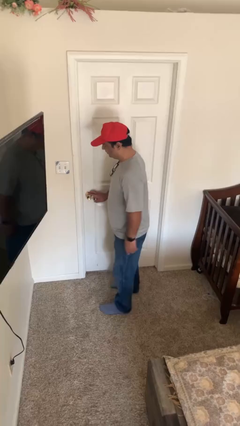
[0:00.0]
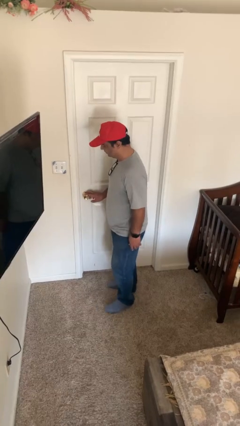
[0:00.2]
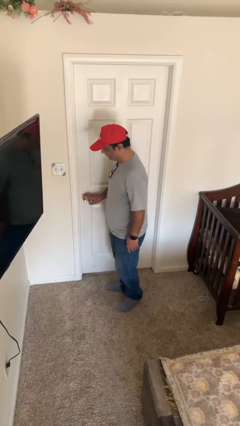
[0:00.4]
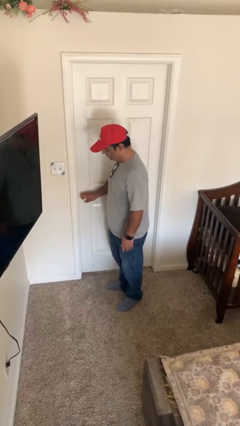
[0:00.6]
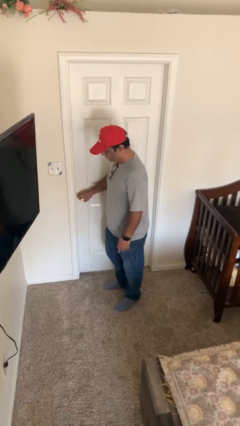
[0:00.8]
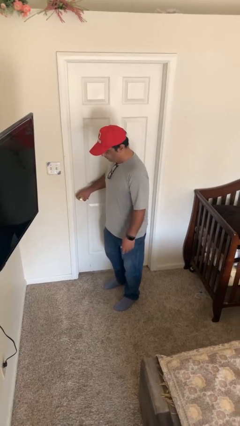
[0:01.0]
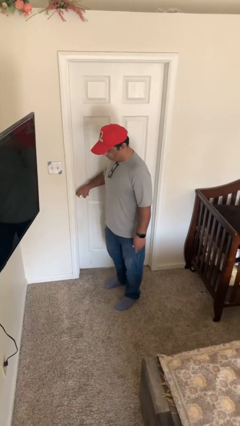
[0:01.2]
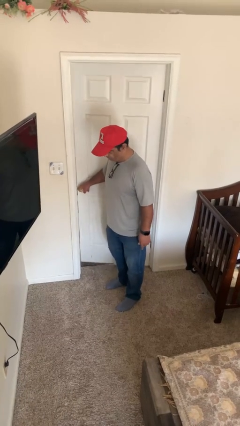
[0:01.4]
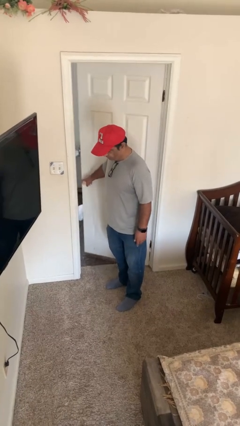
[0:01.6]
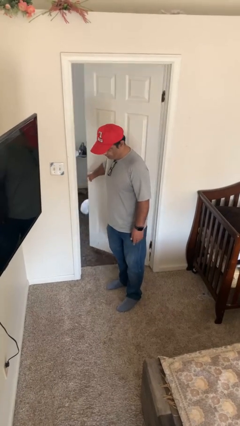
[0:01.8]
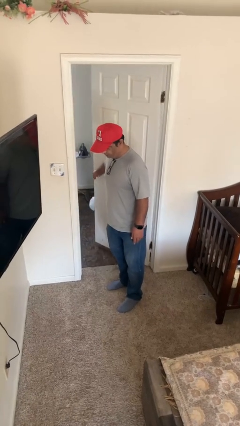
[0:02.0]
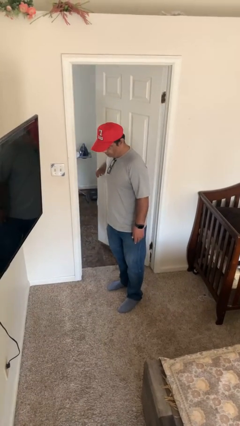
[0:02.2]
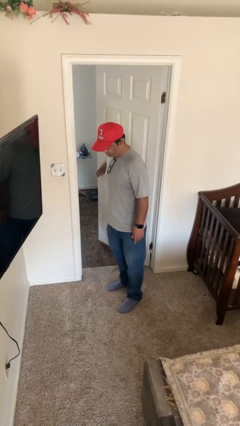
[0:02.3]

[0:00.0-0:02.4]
person opens facility door

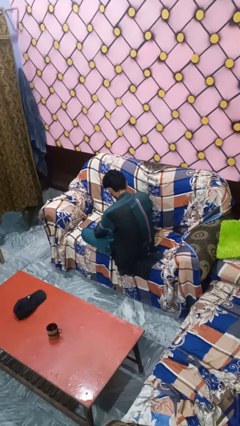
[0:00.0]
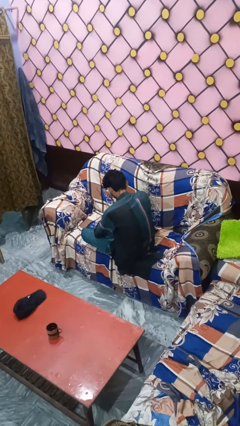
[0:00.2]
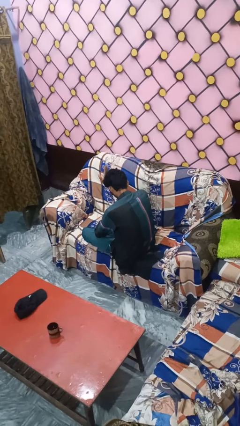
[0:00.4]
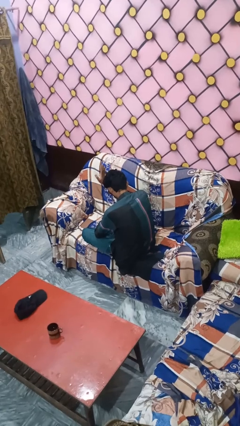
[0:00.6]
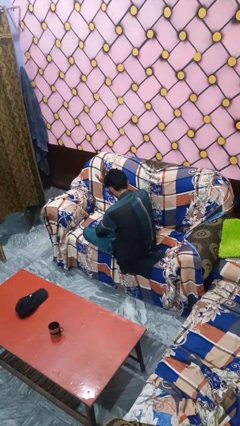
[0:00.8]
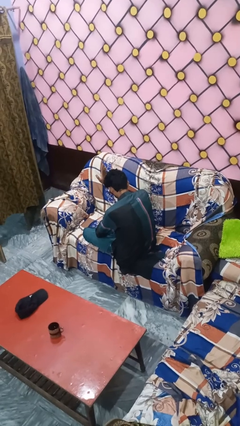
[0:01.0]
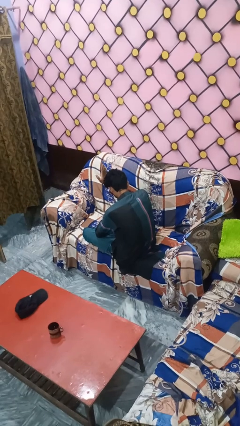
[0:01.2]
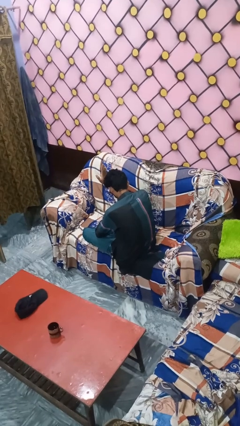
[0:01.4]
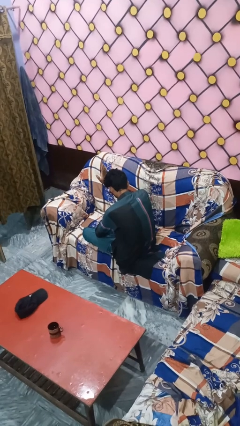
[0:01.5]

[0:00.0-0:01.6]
person gestures stop

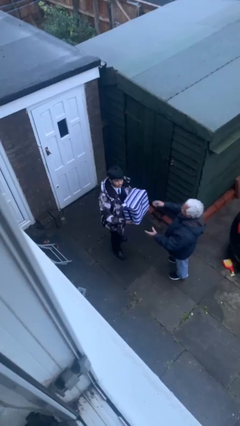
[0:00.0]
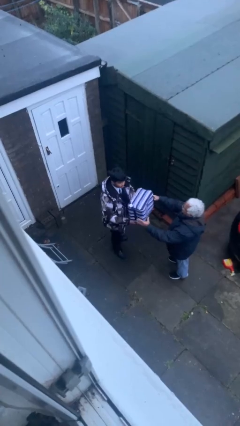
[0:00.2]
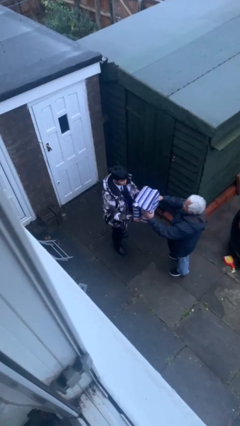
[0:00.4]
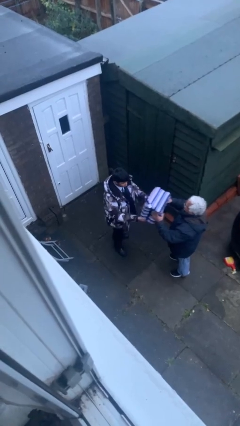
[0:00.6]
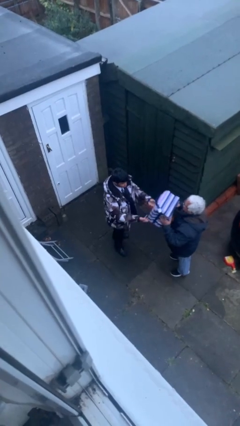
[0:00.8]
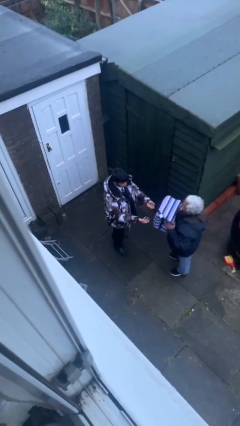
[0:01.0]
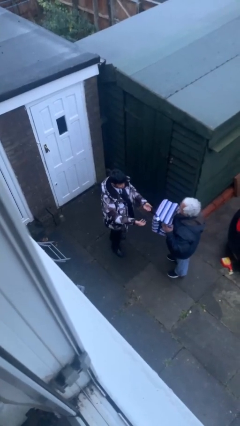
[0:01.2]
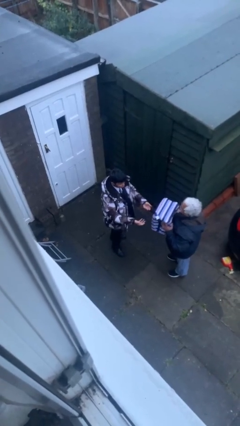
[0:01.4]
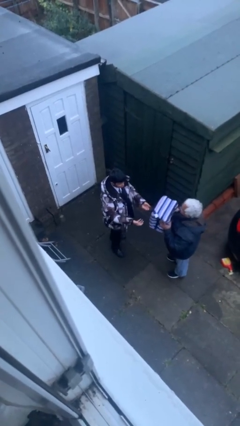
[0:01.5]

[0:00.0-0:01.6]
person transfers object to person

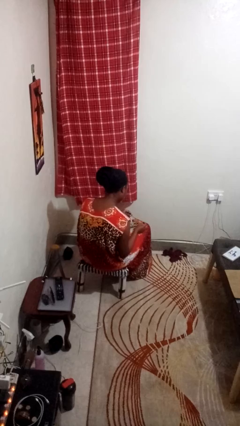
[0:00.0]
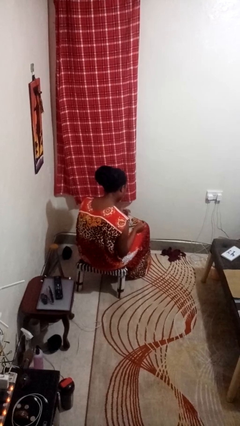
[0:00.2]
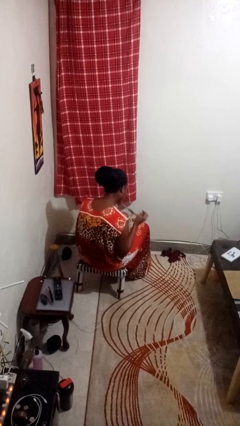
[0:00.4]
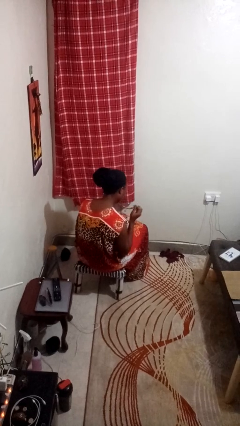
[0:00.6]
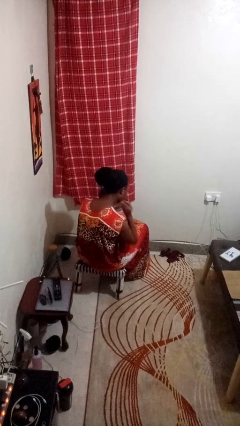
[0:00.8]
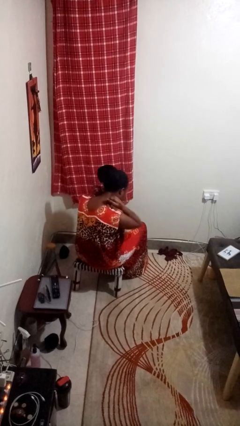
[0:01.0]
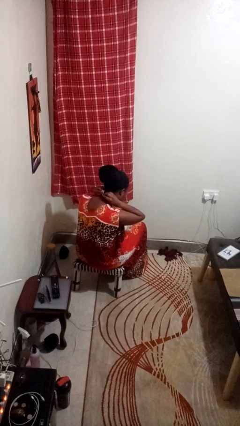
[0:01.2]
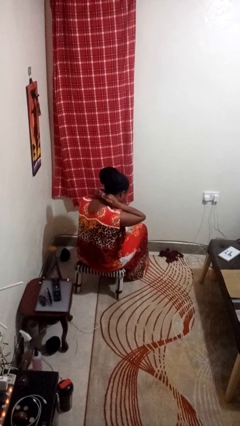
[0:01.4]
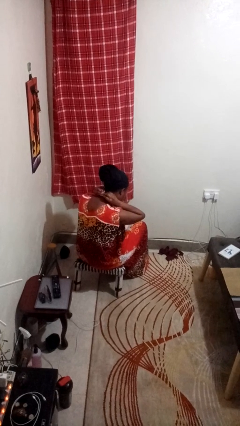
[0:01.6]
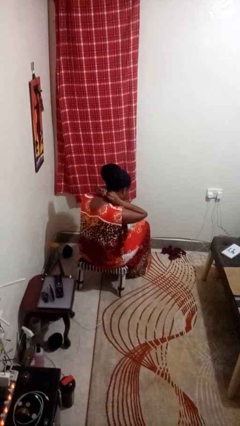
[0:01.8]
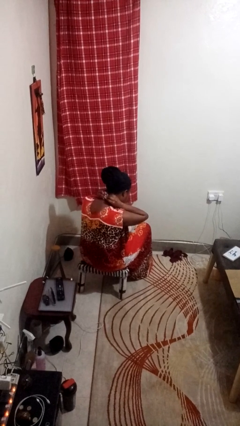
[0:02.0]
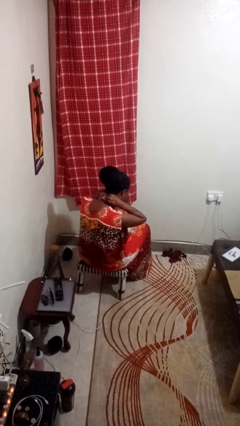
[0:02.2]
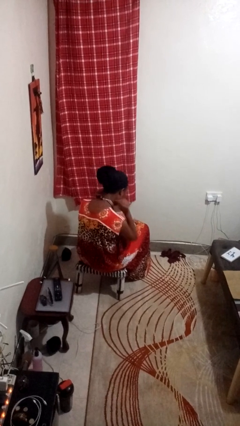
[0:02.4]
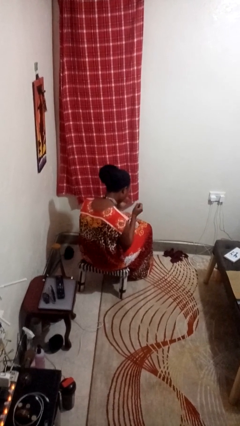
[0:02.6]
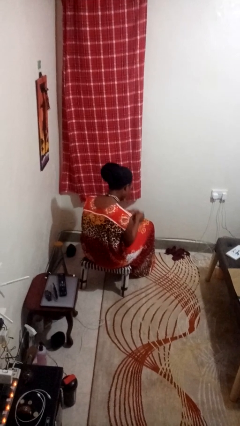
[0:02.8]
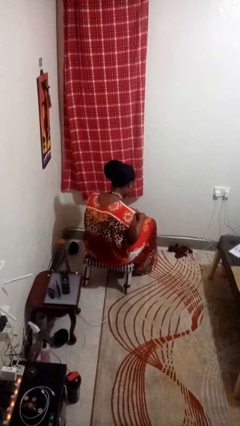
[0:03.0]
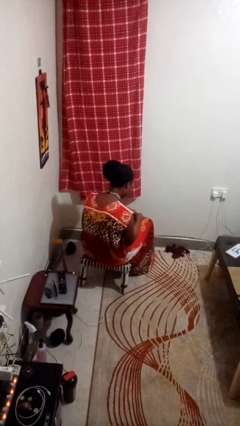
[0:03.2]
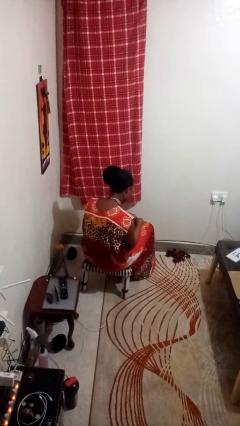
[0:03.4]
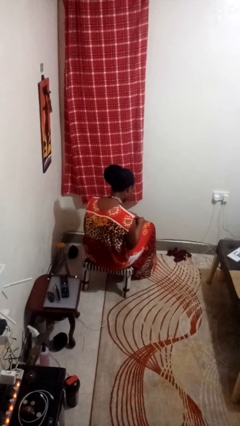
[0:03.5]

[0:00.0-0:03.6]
person puts on necklace

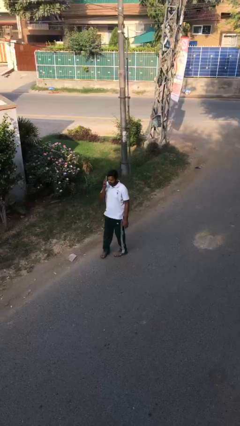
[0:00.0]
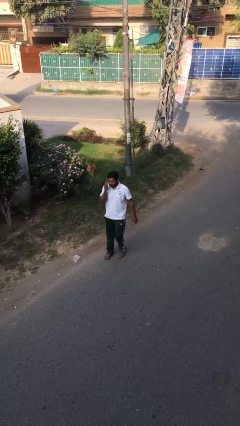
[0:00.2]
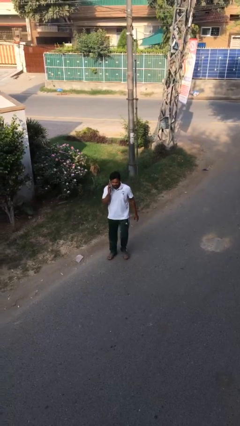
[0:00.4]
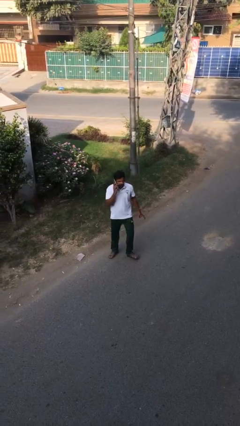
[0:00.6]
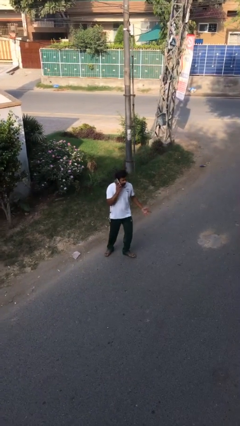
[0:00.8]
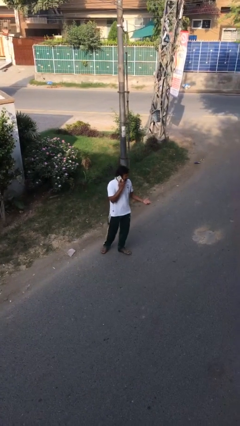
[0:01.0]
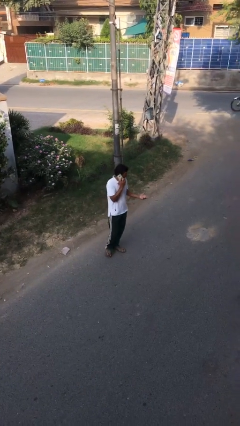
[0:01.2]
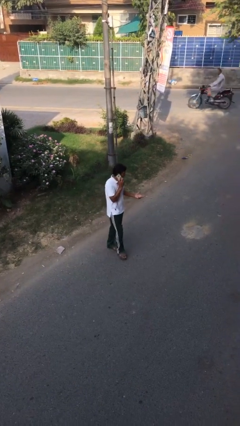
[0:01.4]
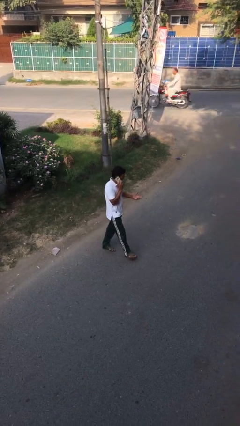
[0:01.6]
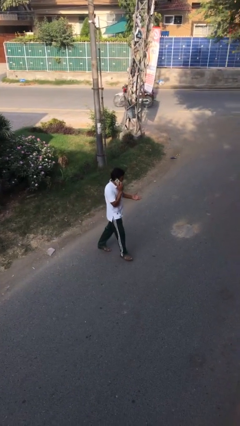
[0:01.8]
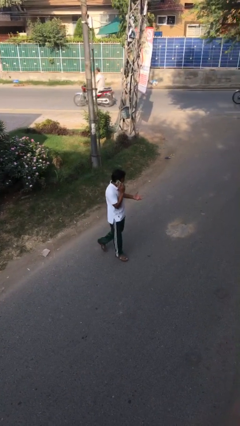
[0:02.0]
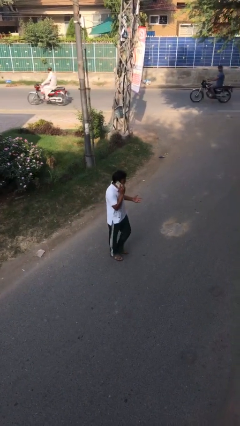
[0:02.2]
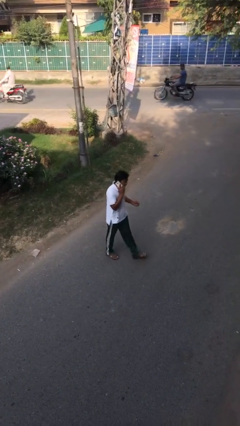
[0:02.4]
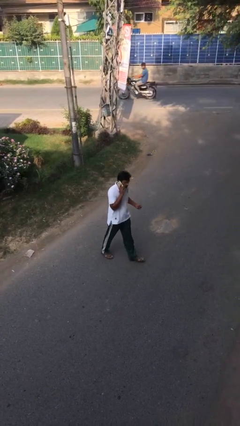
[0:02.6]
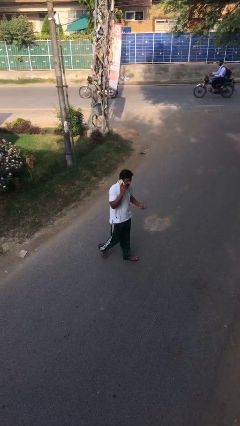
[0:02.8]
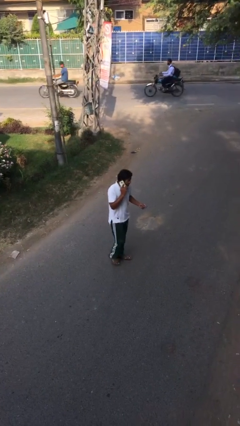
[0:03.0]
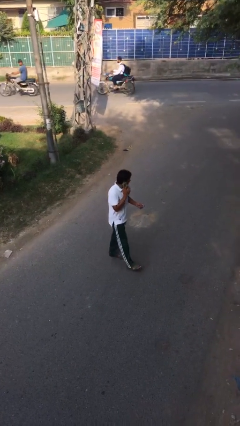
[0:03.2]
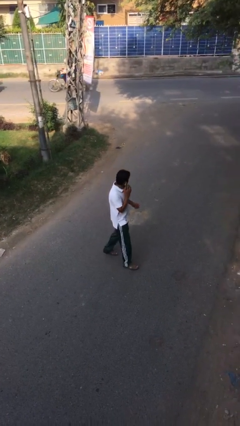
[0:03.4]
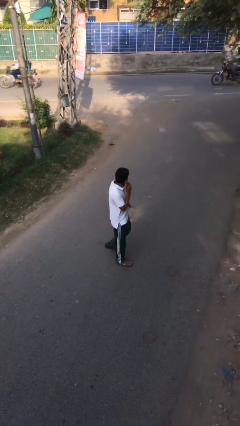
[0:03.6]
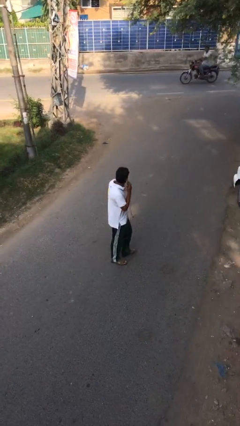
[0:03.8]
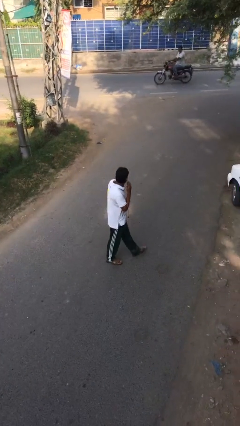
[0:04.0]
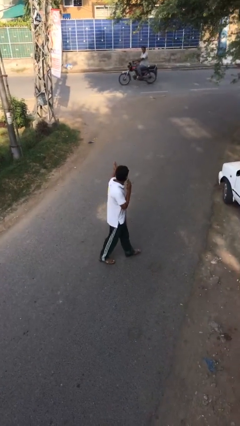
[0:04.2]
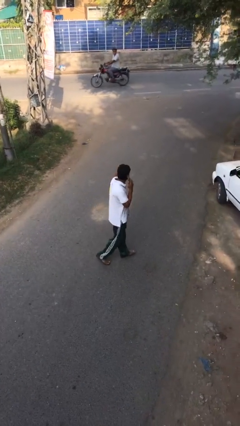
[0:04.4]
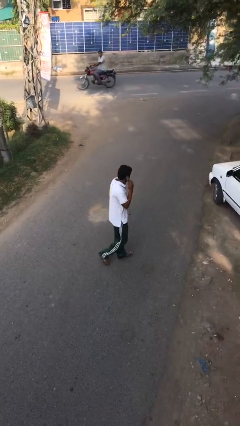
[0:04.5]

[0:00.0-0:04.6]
person talks on phone

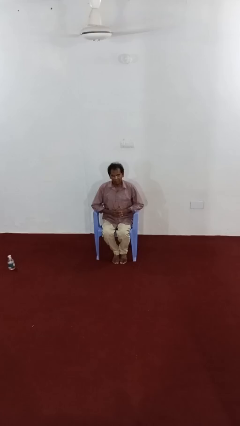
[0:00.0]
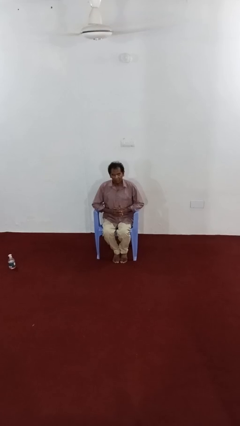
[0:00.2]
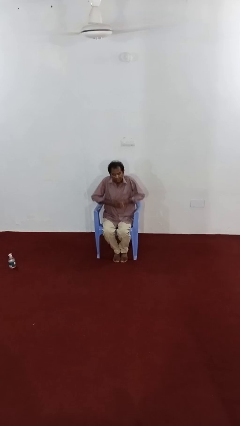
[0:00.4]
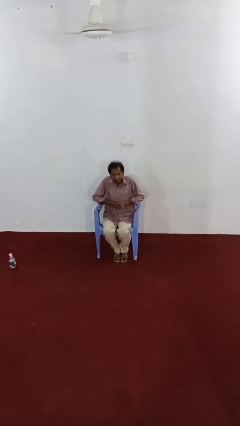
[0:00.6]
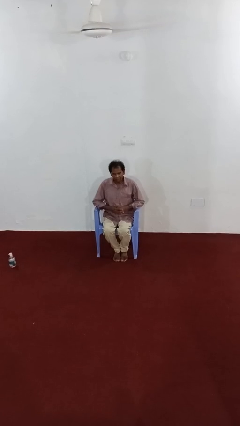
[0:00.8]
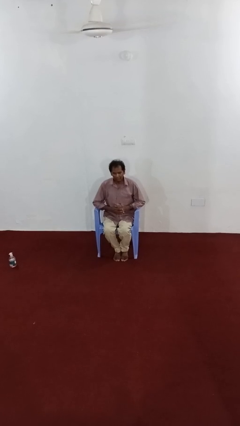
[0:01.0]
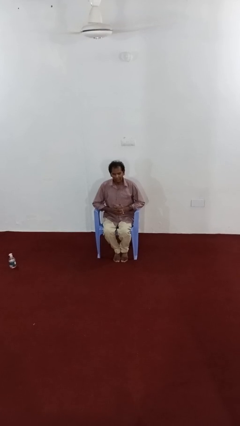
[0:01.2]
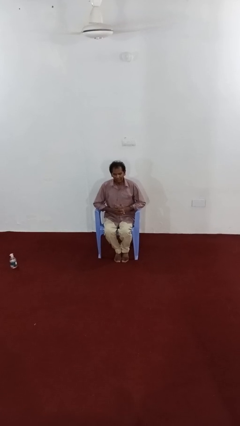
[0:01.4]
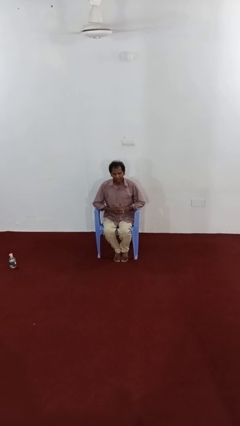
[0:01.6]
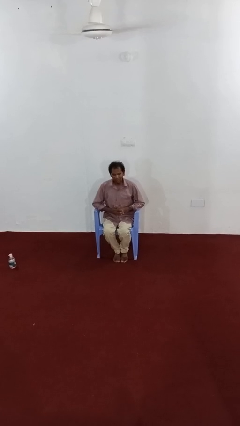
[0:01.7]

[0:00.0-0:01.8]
person shrugs

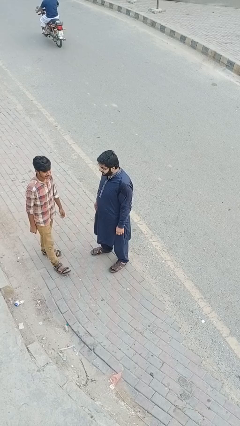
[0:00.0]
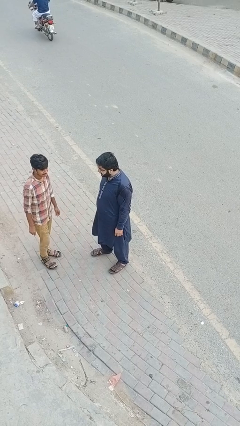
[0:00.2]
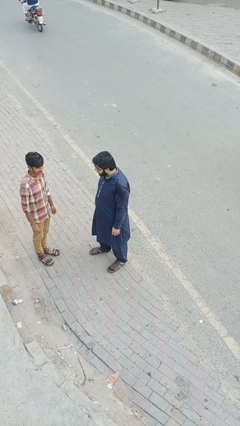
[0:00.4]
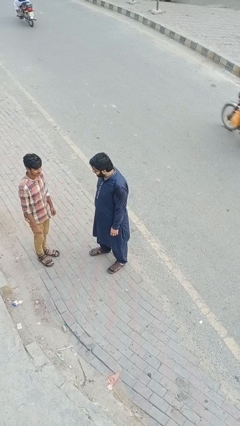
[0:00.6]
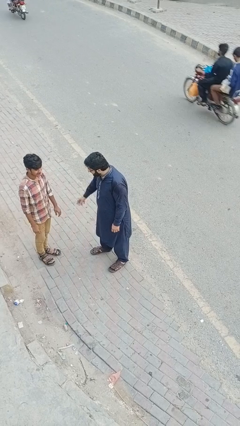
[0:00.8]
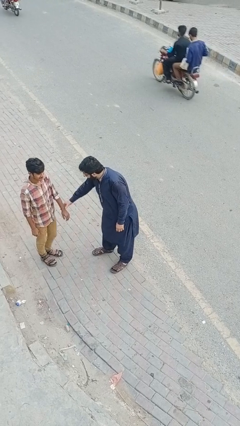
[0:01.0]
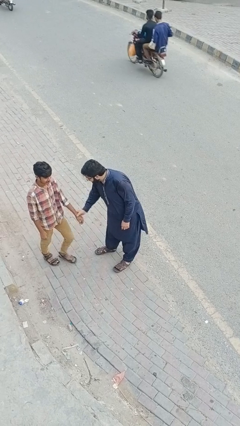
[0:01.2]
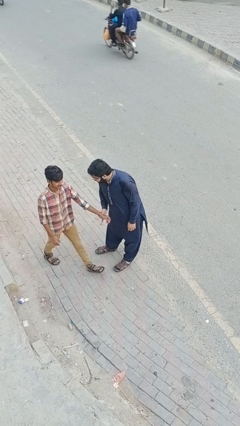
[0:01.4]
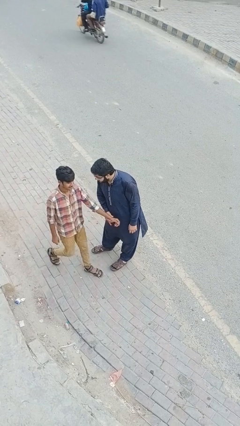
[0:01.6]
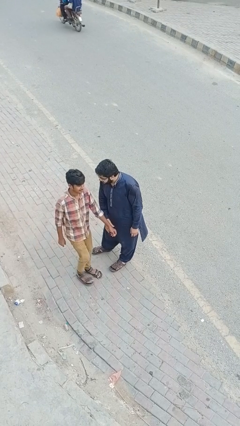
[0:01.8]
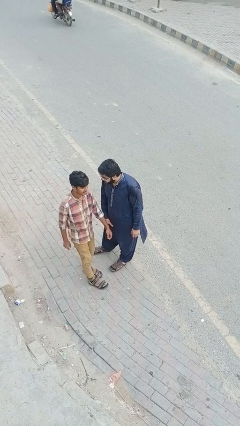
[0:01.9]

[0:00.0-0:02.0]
person grabs person by forearm
